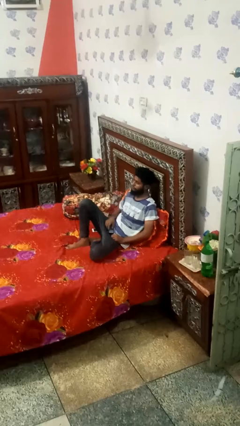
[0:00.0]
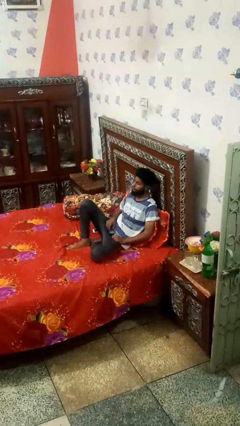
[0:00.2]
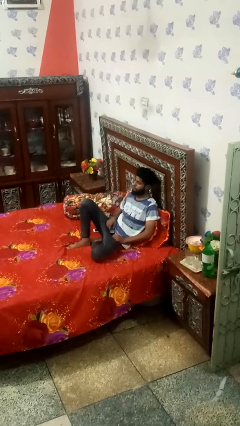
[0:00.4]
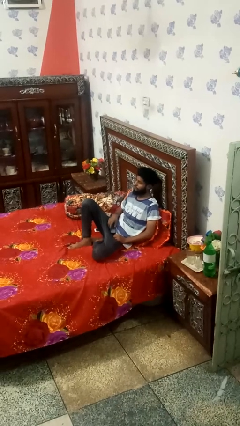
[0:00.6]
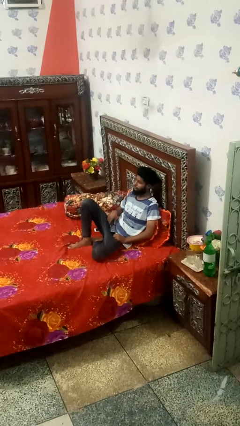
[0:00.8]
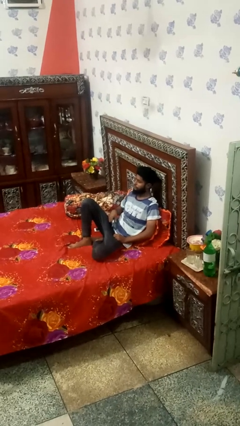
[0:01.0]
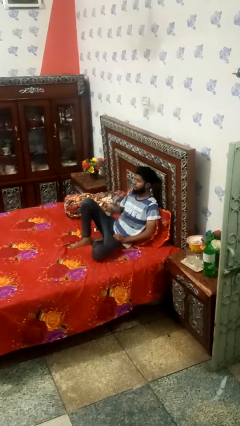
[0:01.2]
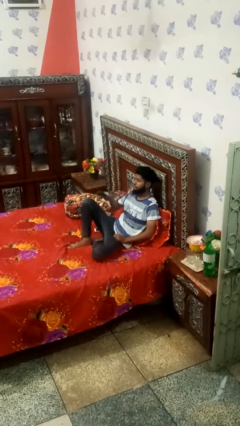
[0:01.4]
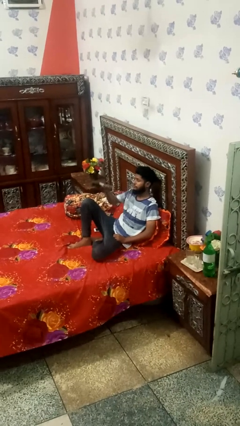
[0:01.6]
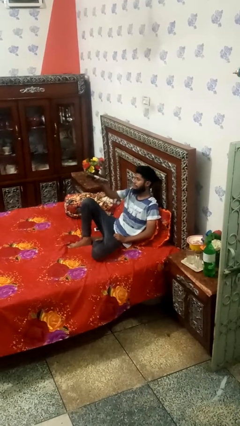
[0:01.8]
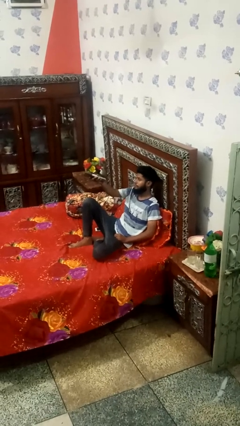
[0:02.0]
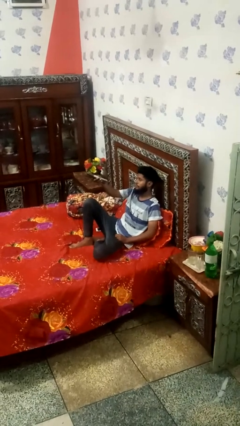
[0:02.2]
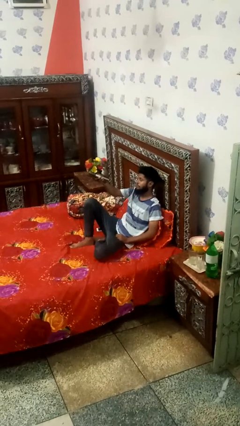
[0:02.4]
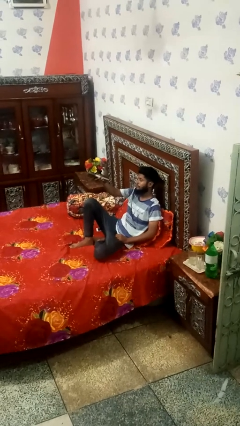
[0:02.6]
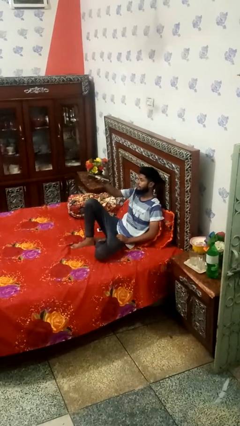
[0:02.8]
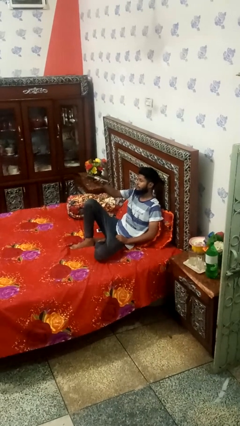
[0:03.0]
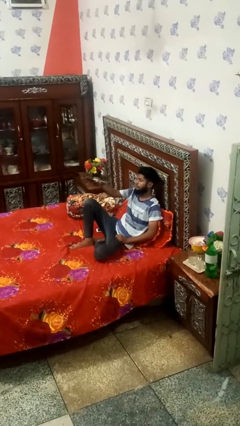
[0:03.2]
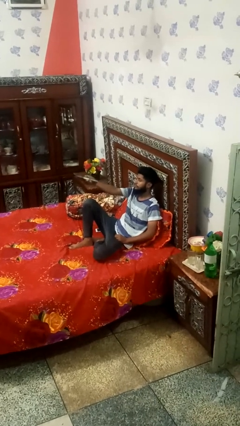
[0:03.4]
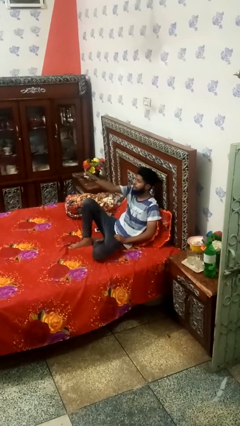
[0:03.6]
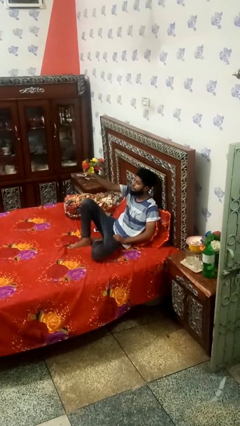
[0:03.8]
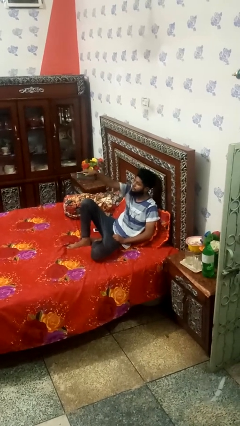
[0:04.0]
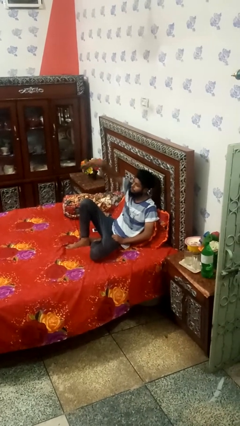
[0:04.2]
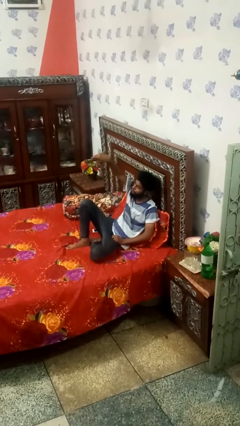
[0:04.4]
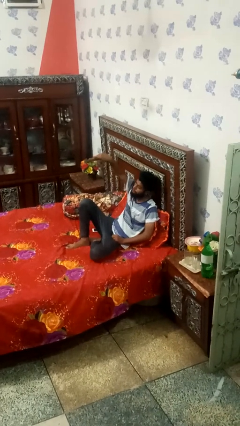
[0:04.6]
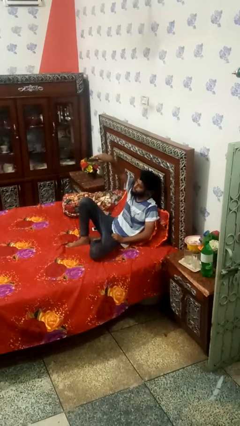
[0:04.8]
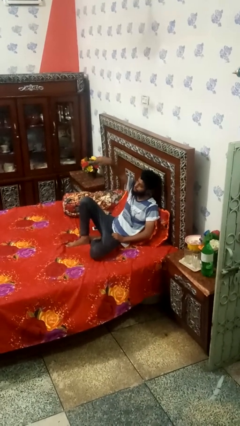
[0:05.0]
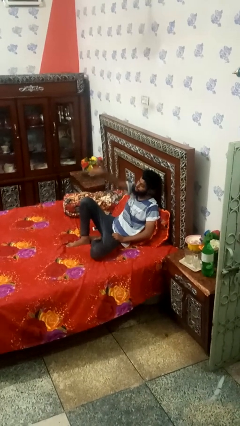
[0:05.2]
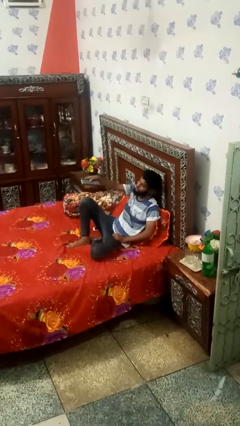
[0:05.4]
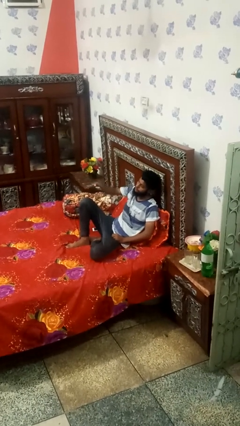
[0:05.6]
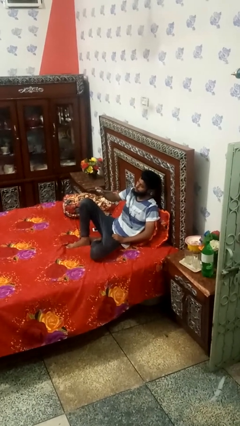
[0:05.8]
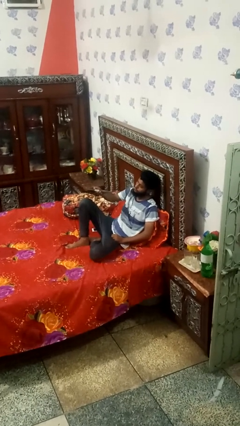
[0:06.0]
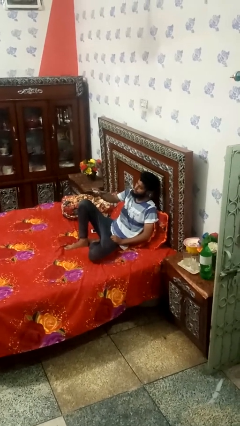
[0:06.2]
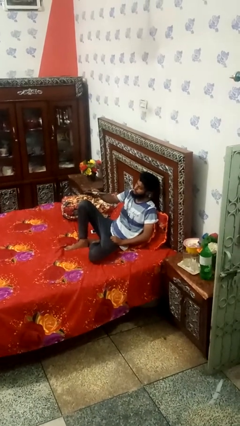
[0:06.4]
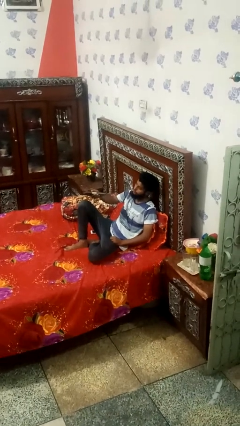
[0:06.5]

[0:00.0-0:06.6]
person uses television remote

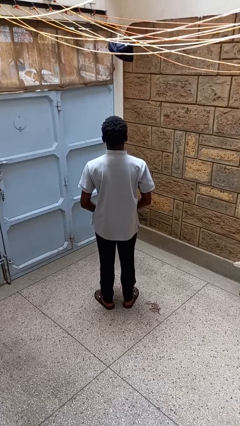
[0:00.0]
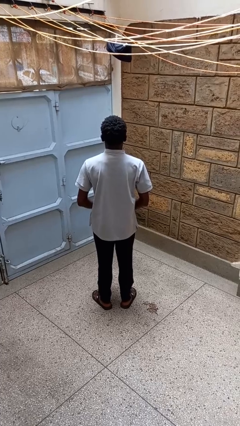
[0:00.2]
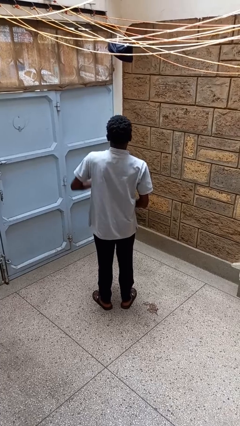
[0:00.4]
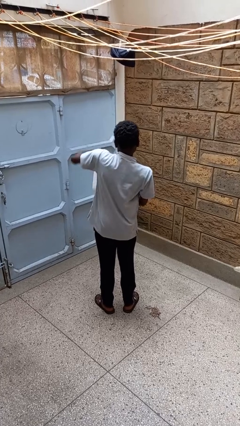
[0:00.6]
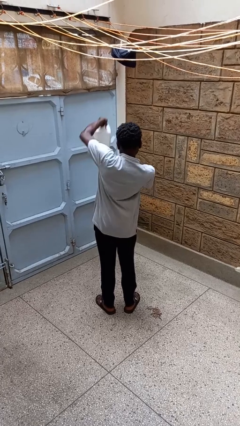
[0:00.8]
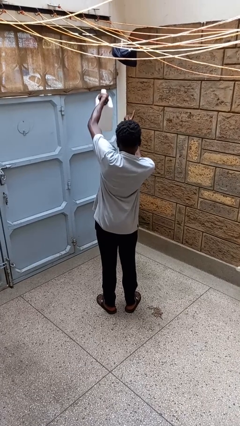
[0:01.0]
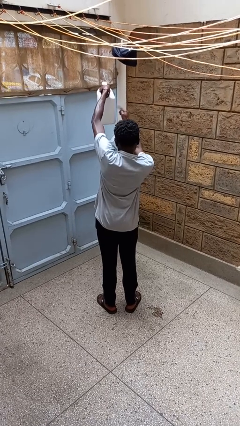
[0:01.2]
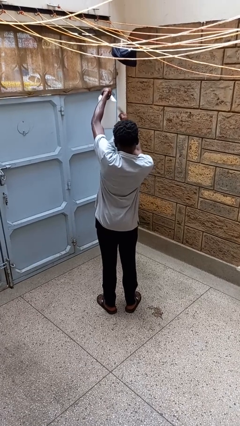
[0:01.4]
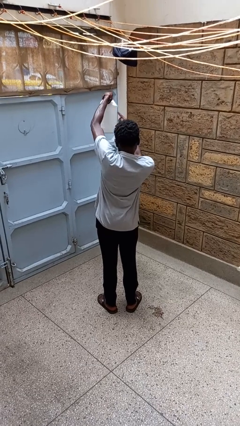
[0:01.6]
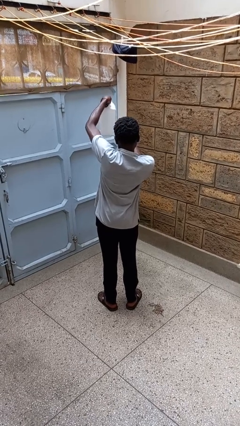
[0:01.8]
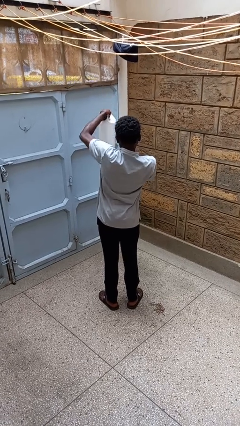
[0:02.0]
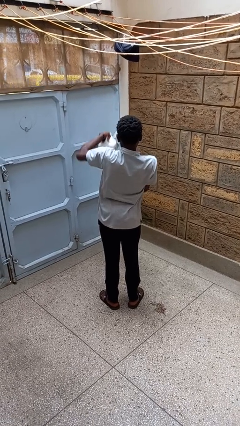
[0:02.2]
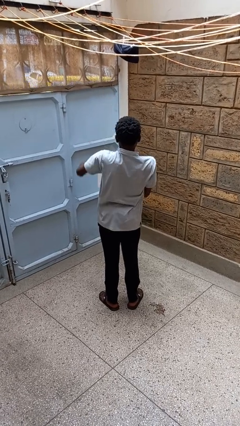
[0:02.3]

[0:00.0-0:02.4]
person taps object with finger

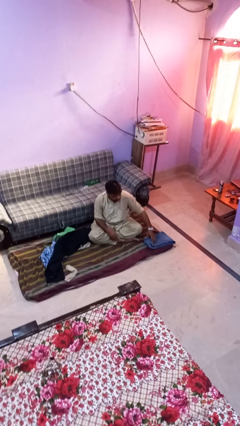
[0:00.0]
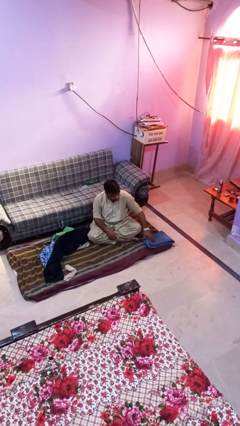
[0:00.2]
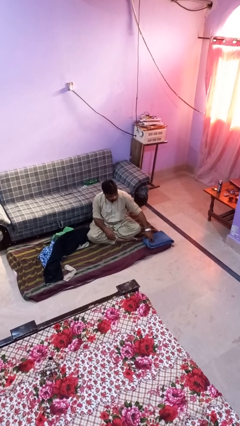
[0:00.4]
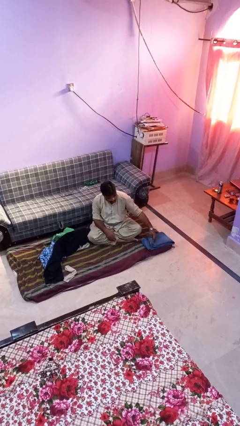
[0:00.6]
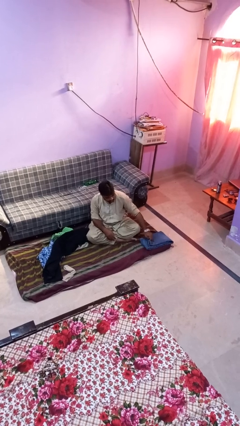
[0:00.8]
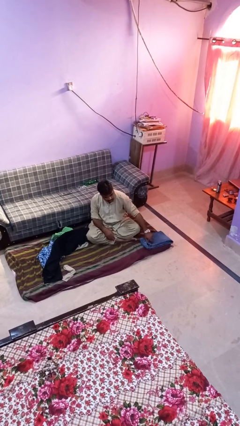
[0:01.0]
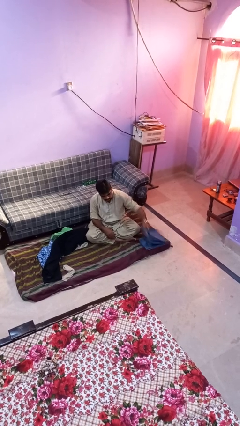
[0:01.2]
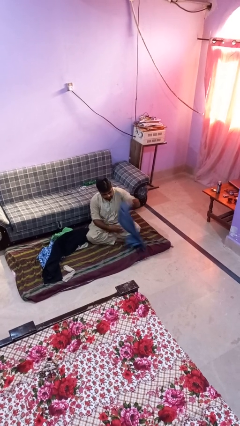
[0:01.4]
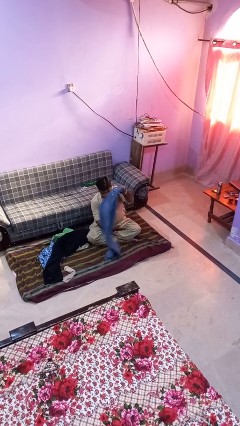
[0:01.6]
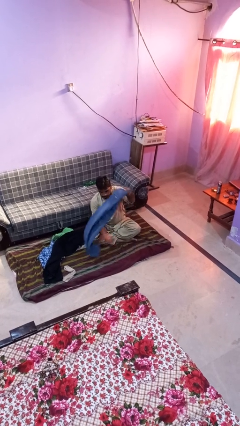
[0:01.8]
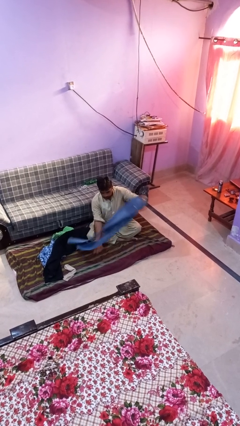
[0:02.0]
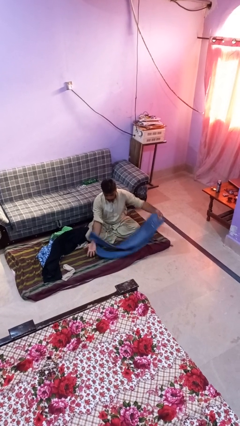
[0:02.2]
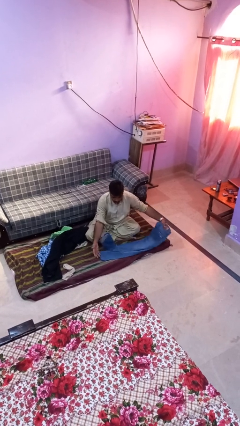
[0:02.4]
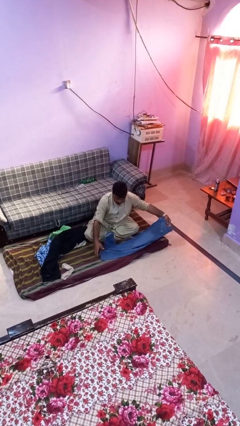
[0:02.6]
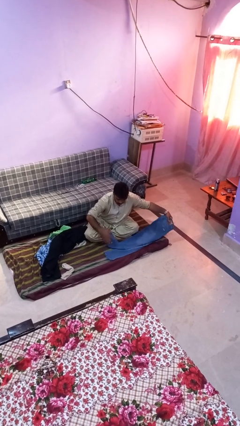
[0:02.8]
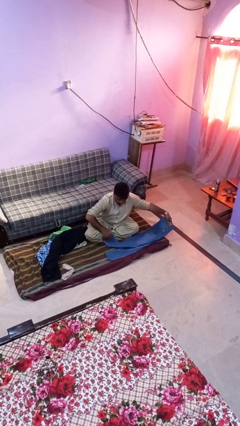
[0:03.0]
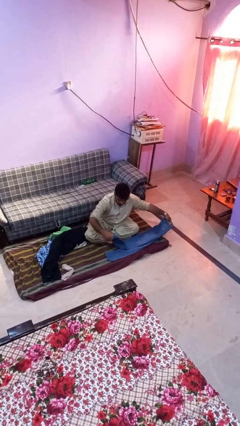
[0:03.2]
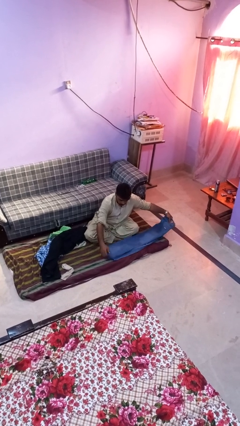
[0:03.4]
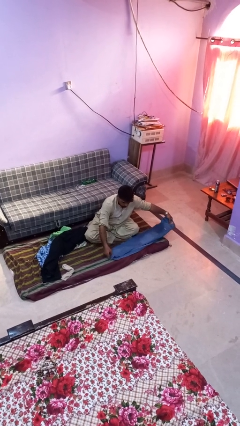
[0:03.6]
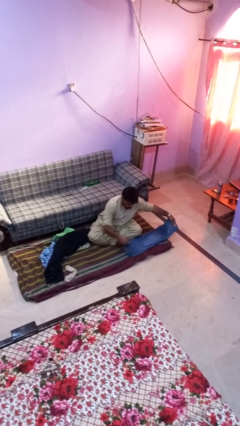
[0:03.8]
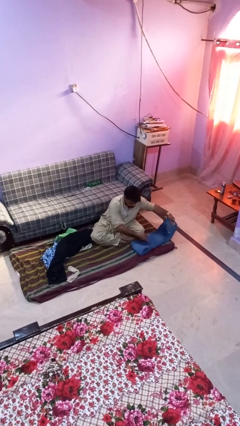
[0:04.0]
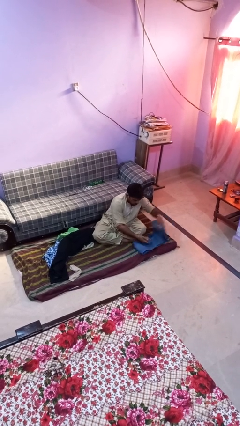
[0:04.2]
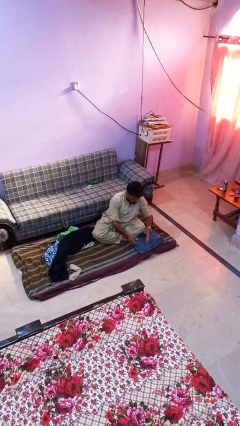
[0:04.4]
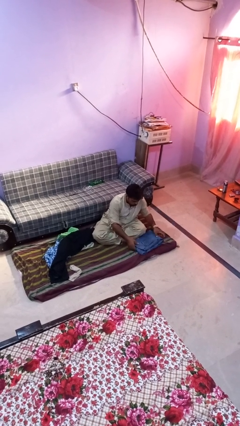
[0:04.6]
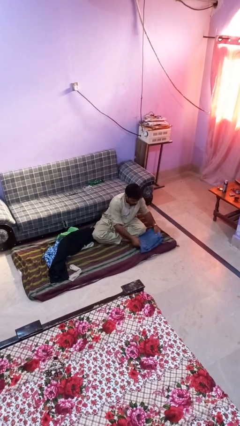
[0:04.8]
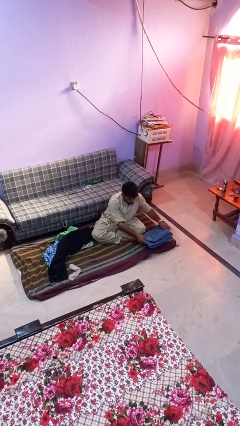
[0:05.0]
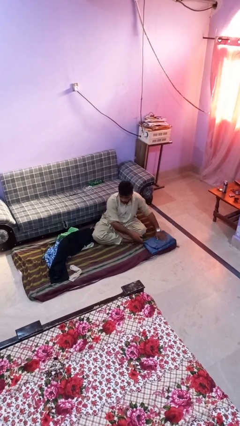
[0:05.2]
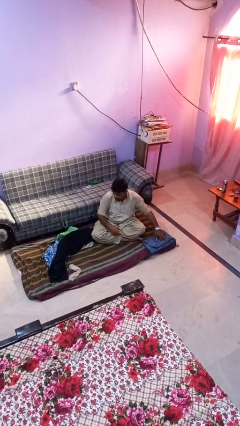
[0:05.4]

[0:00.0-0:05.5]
person folds pants

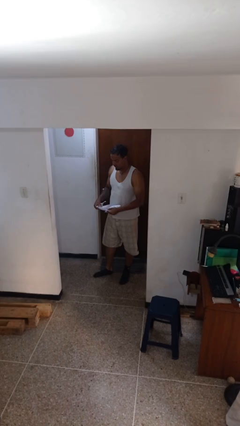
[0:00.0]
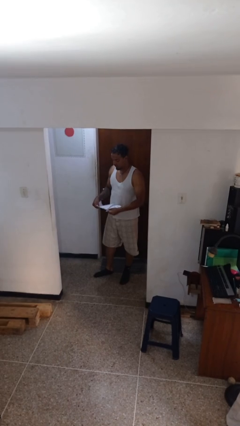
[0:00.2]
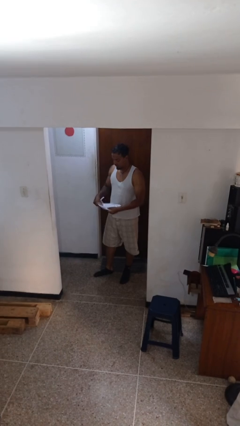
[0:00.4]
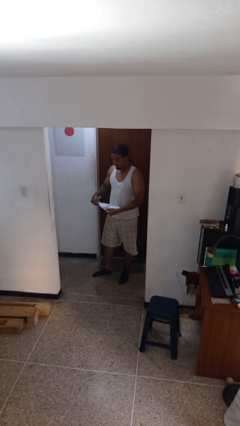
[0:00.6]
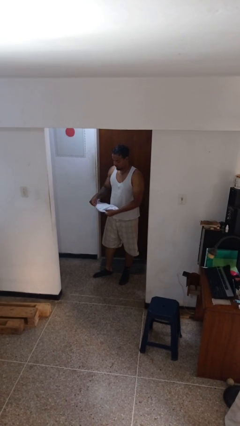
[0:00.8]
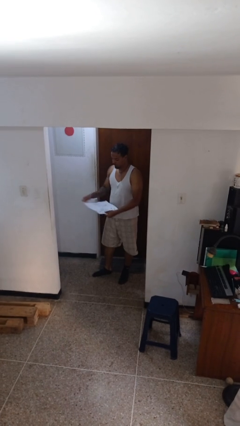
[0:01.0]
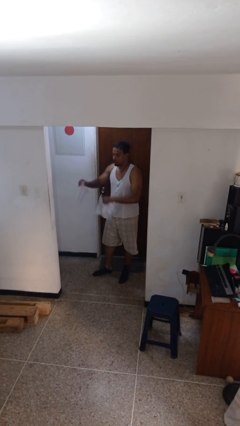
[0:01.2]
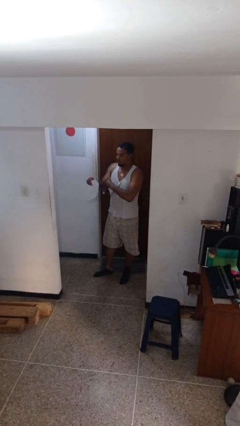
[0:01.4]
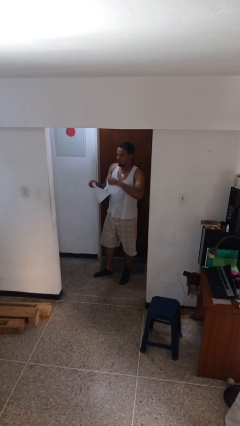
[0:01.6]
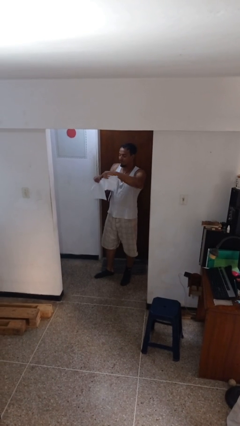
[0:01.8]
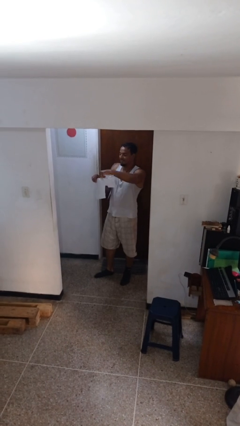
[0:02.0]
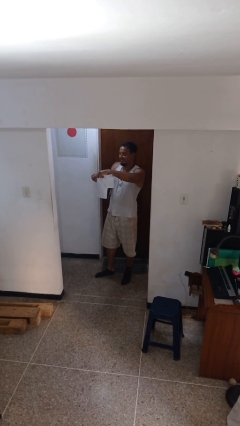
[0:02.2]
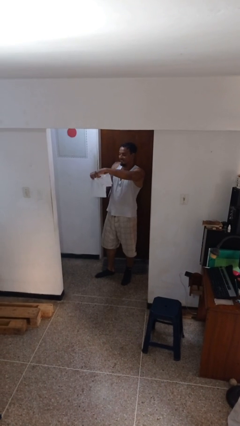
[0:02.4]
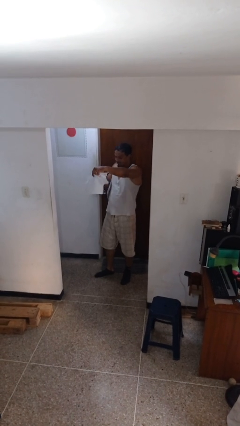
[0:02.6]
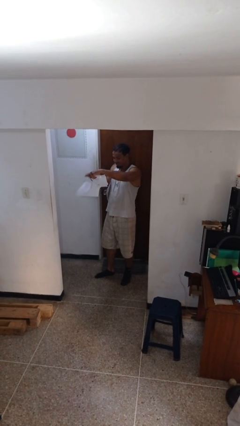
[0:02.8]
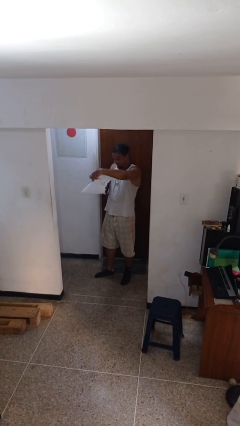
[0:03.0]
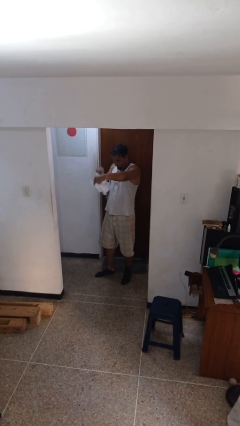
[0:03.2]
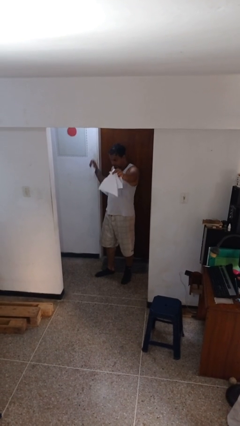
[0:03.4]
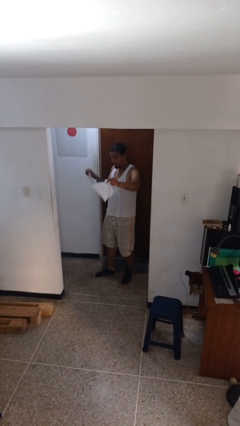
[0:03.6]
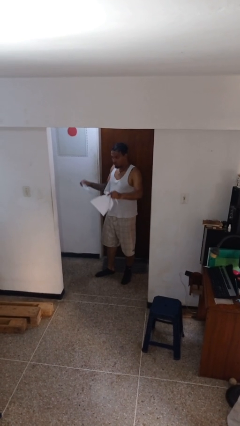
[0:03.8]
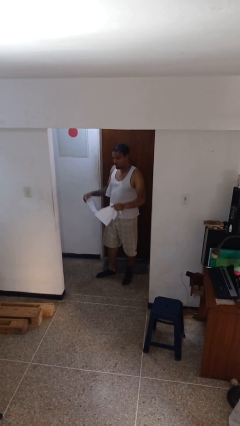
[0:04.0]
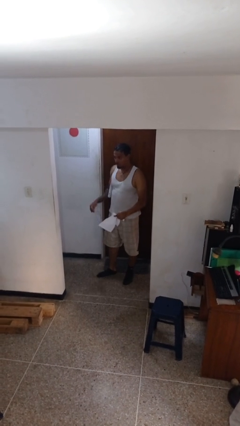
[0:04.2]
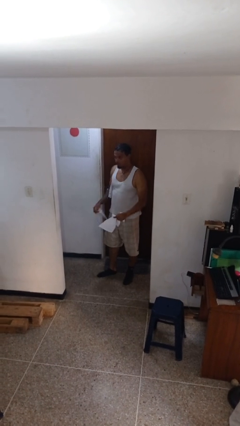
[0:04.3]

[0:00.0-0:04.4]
person tears paper
